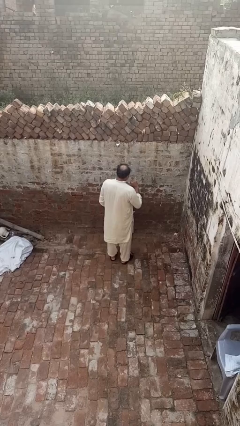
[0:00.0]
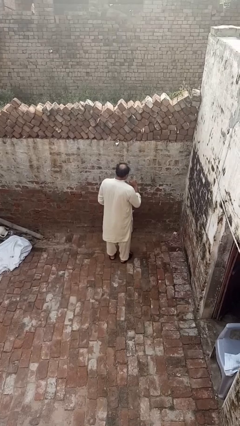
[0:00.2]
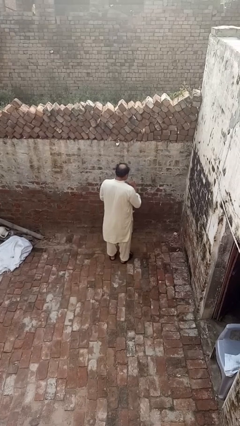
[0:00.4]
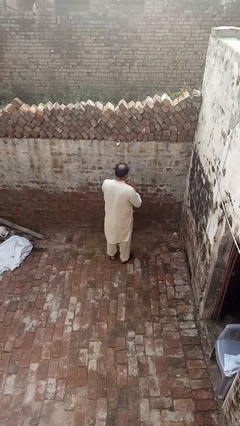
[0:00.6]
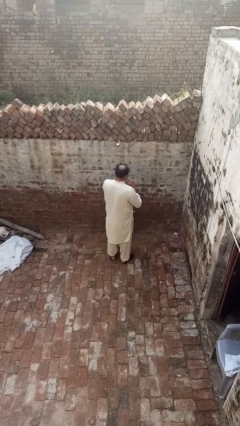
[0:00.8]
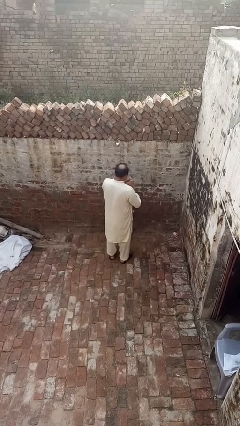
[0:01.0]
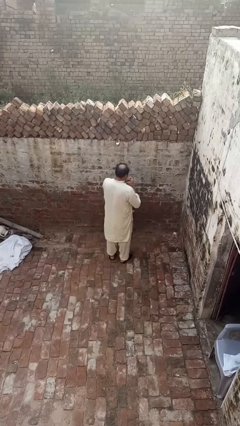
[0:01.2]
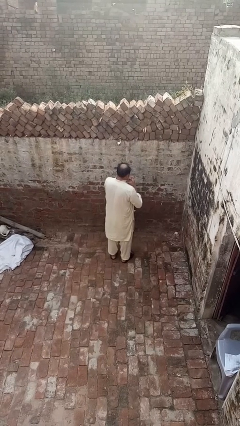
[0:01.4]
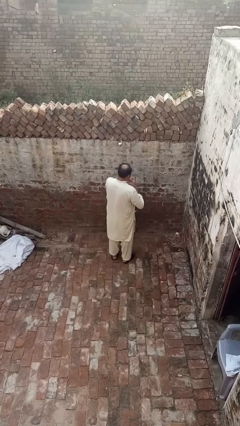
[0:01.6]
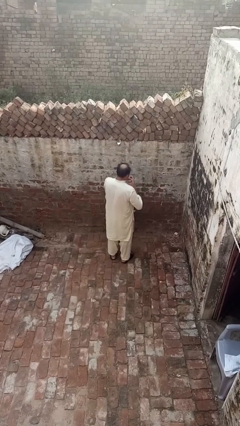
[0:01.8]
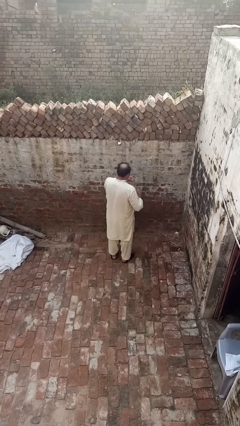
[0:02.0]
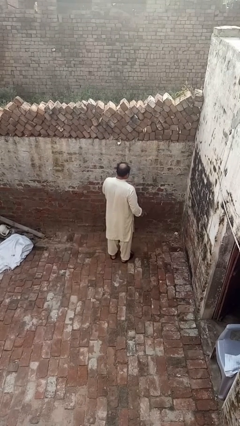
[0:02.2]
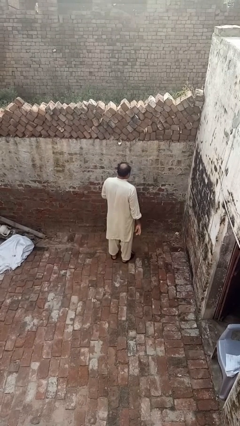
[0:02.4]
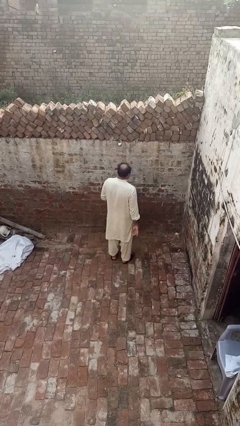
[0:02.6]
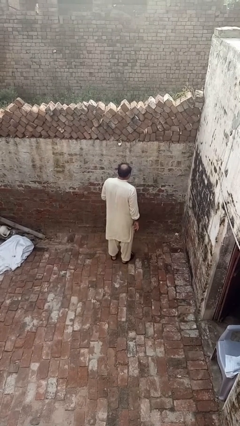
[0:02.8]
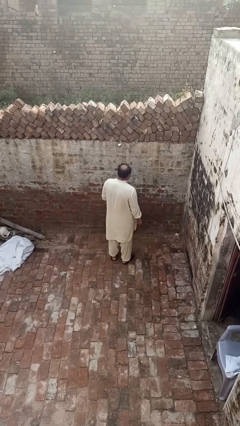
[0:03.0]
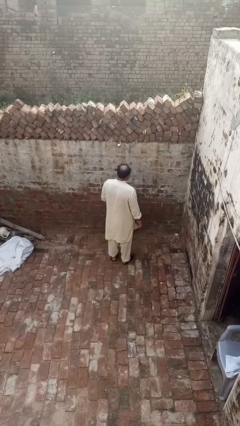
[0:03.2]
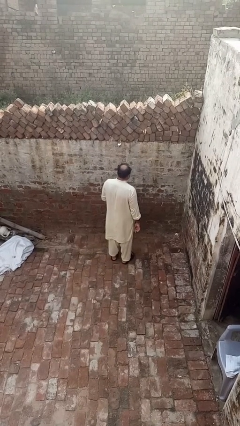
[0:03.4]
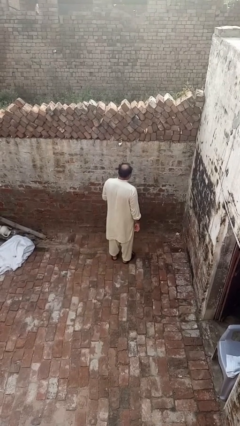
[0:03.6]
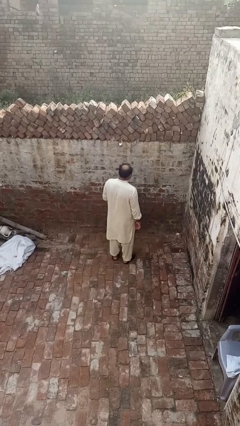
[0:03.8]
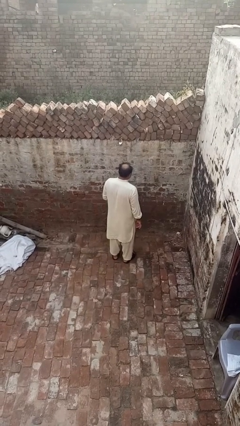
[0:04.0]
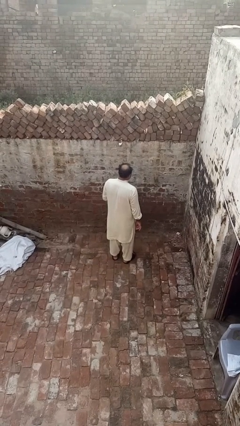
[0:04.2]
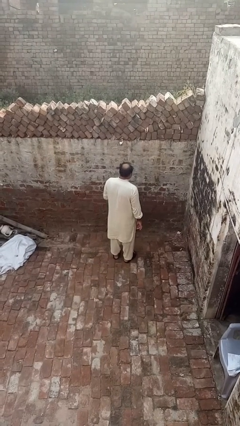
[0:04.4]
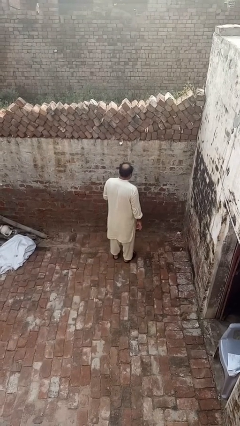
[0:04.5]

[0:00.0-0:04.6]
person takes off ring

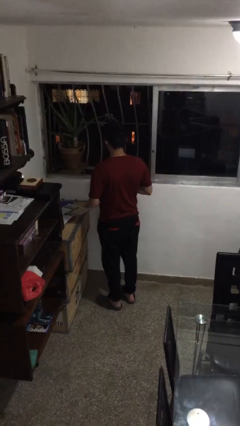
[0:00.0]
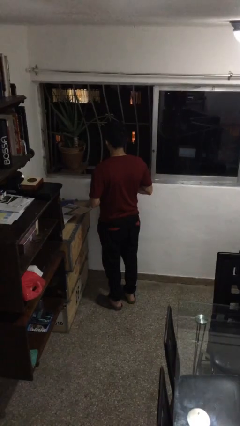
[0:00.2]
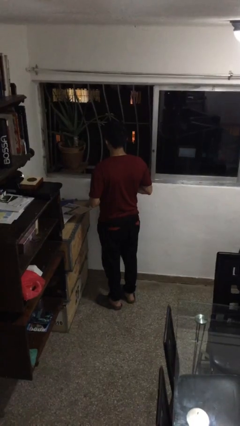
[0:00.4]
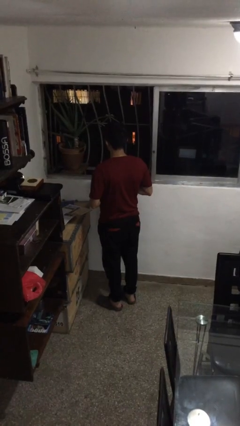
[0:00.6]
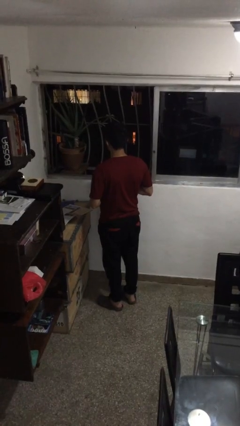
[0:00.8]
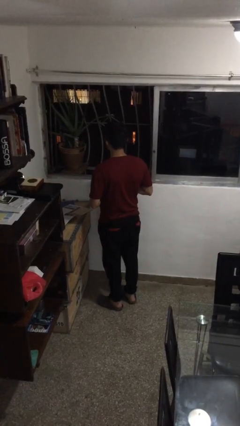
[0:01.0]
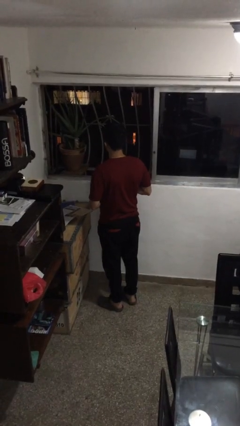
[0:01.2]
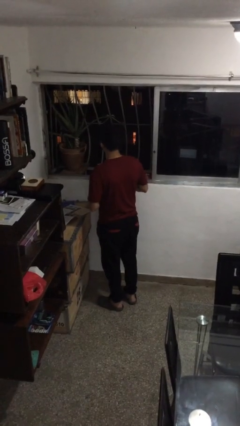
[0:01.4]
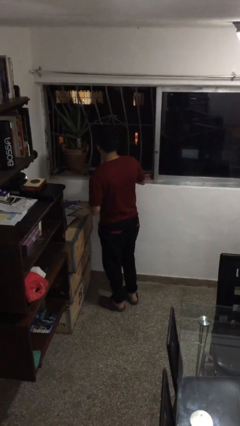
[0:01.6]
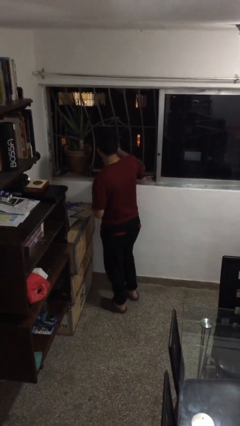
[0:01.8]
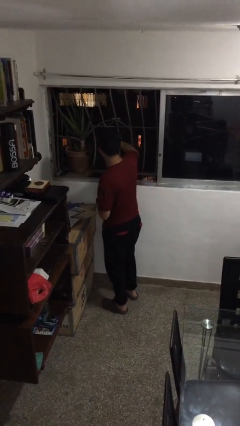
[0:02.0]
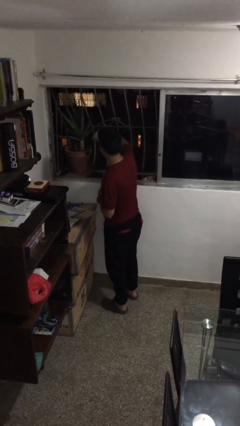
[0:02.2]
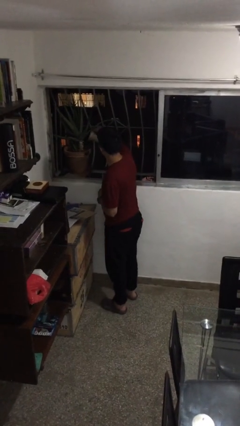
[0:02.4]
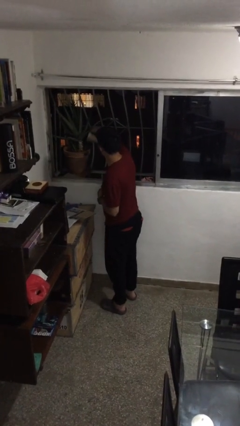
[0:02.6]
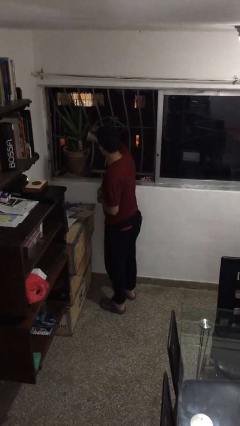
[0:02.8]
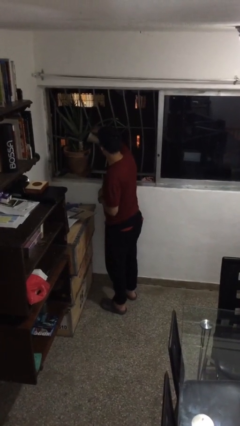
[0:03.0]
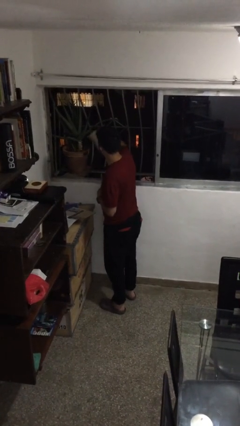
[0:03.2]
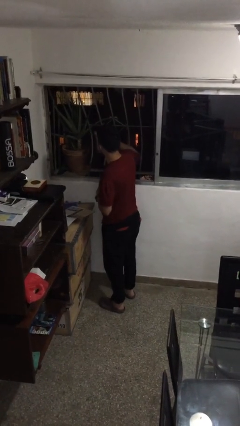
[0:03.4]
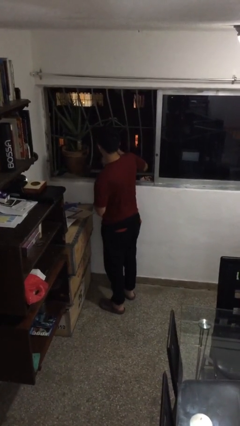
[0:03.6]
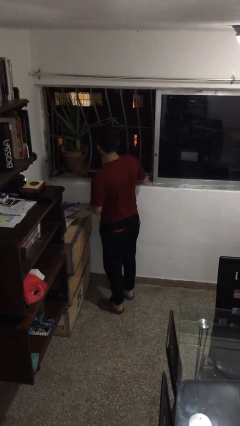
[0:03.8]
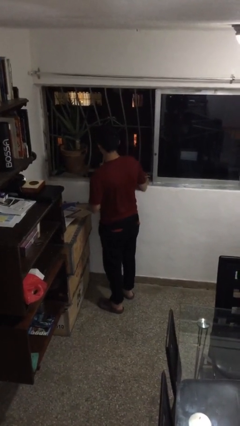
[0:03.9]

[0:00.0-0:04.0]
person waters houseplant

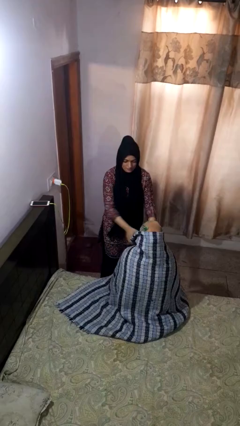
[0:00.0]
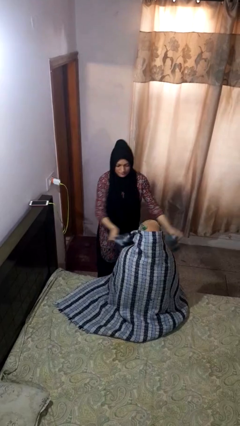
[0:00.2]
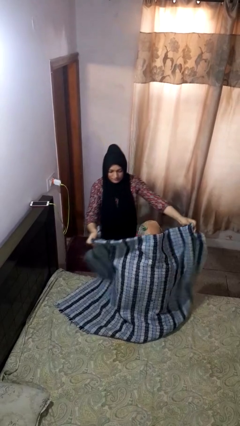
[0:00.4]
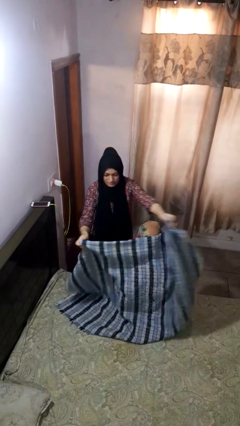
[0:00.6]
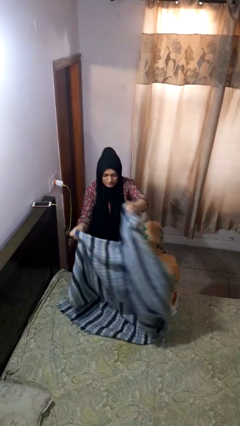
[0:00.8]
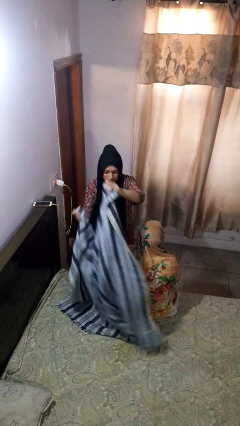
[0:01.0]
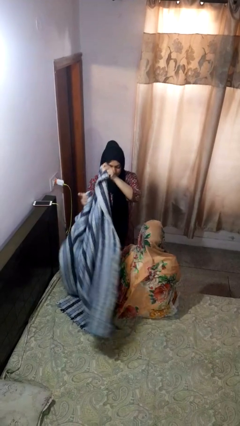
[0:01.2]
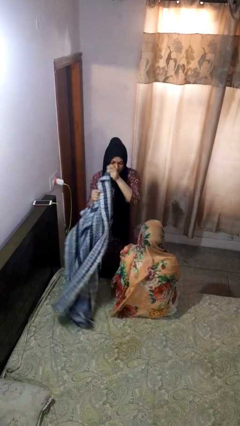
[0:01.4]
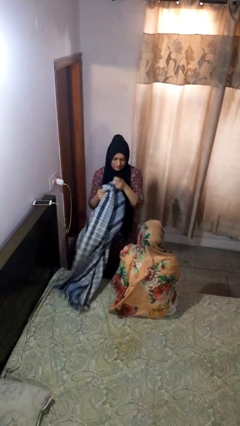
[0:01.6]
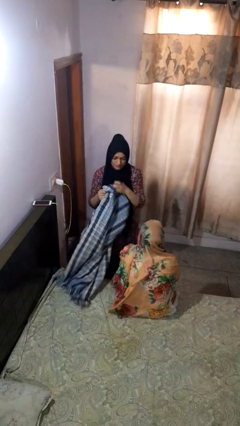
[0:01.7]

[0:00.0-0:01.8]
person uncovers friend with blanket

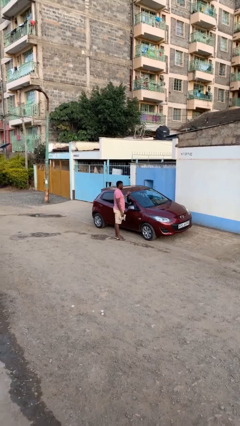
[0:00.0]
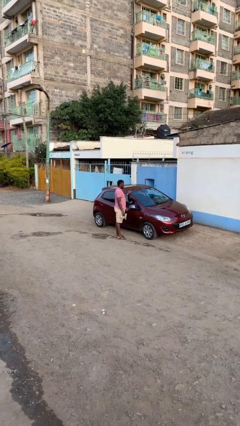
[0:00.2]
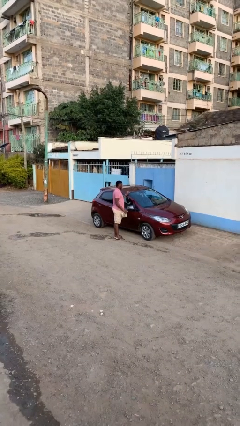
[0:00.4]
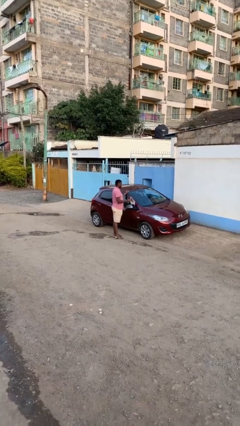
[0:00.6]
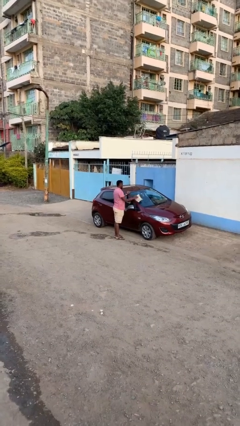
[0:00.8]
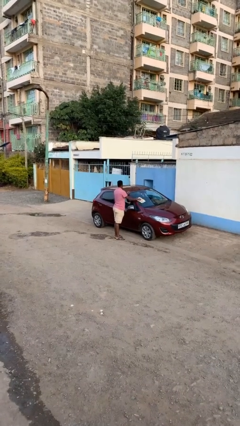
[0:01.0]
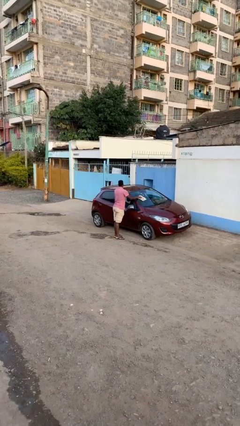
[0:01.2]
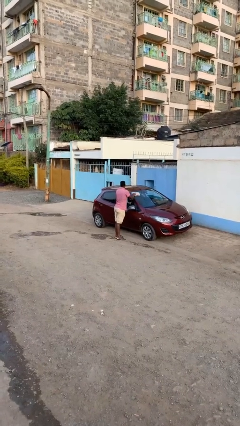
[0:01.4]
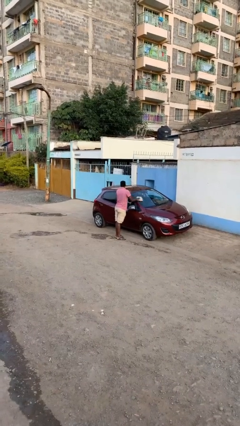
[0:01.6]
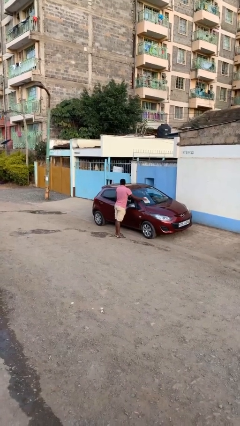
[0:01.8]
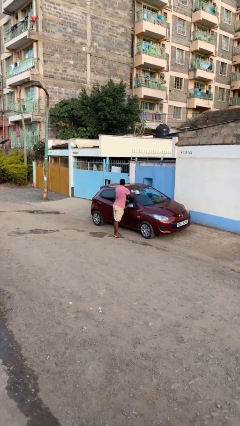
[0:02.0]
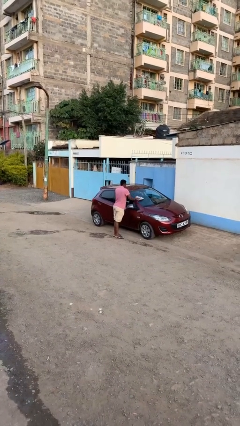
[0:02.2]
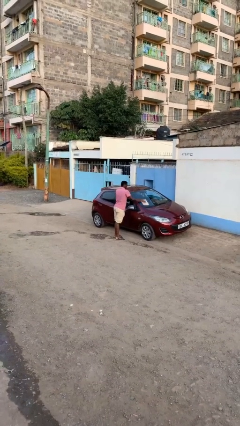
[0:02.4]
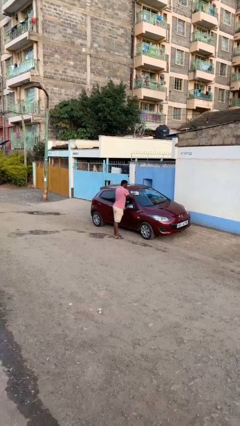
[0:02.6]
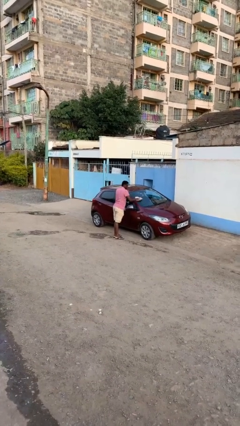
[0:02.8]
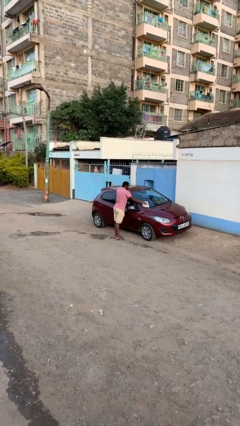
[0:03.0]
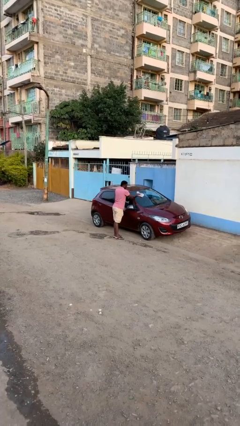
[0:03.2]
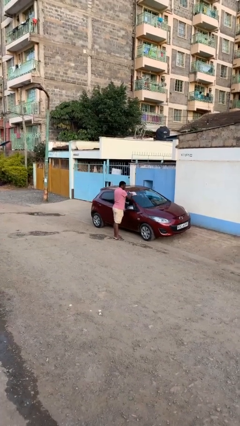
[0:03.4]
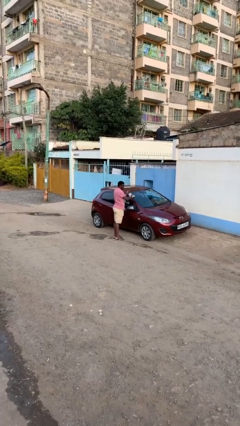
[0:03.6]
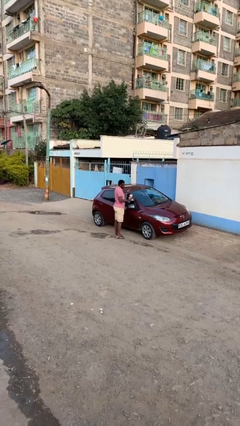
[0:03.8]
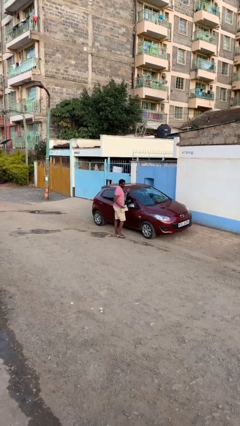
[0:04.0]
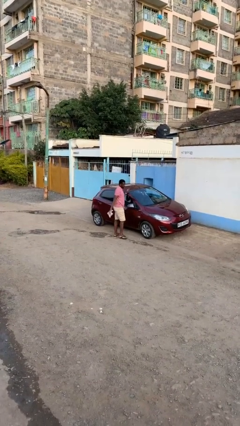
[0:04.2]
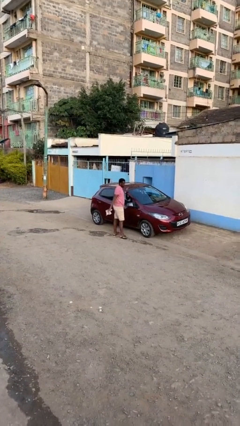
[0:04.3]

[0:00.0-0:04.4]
person polishes car with rag

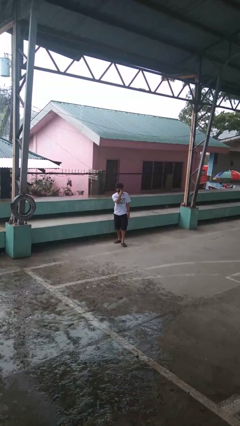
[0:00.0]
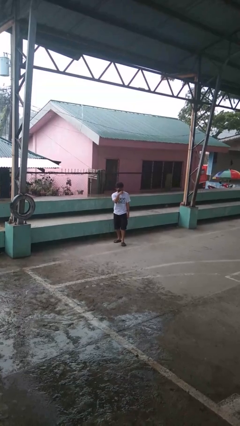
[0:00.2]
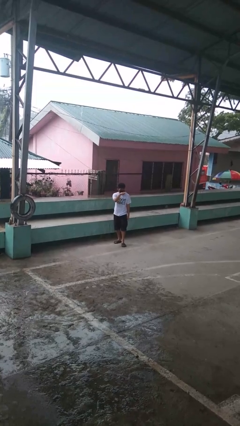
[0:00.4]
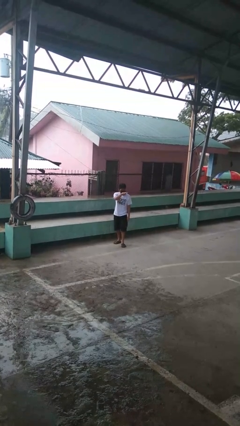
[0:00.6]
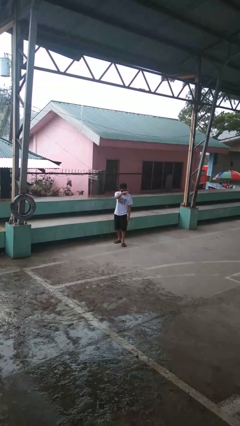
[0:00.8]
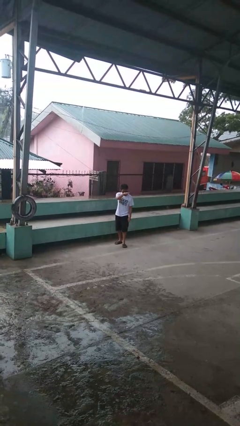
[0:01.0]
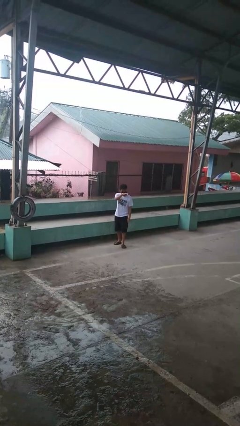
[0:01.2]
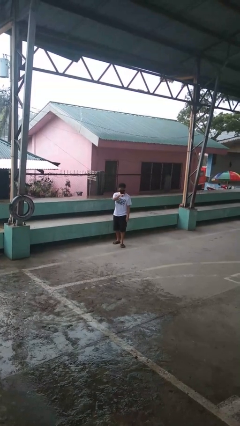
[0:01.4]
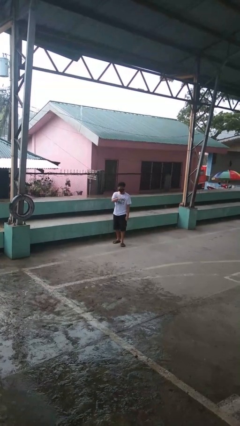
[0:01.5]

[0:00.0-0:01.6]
person gestures watch closely

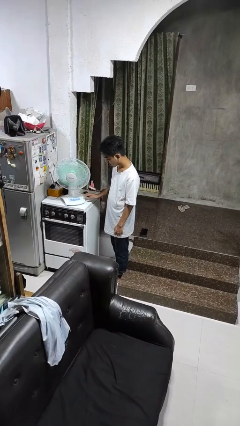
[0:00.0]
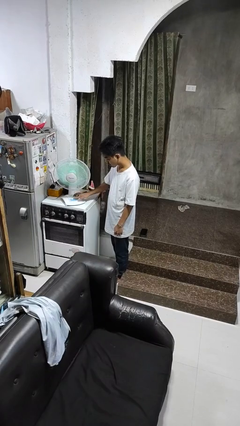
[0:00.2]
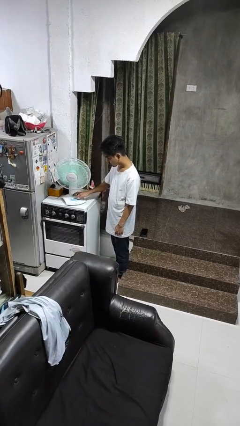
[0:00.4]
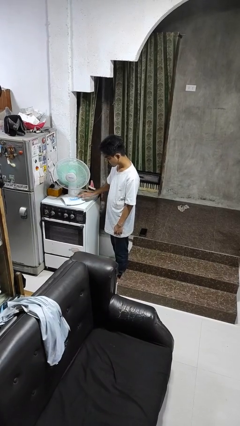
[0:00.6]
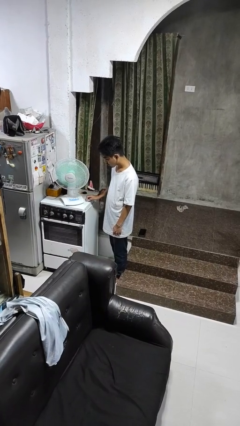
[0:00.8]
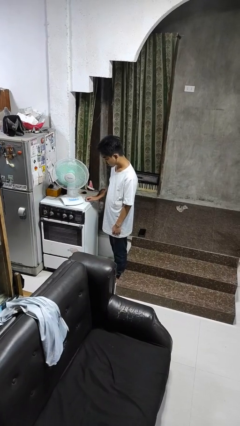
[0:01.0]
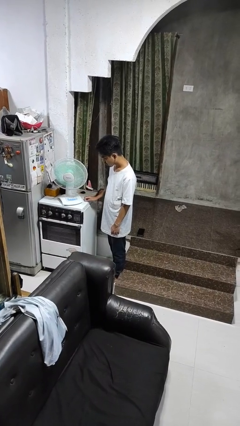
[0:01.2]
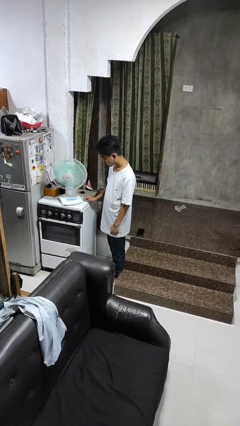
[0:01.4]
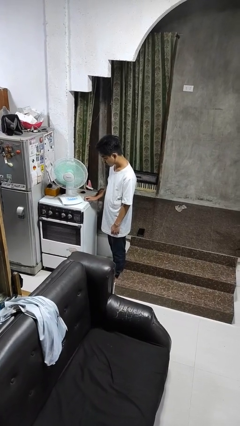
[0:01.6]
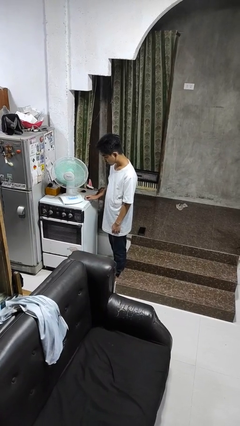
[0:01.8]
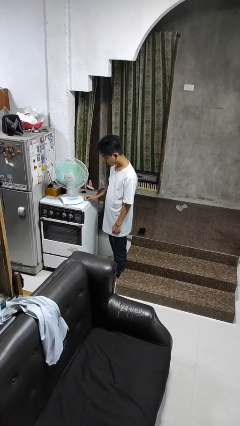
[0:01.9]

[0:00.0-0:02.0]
person turns on fan
